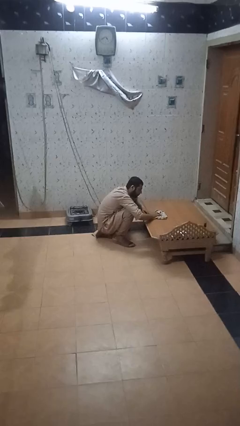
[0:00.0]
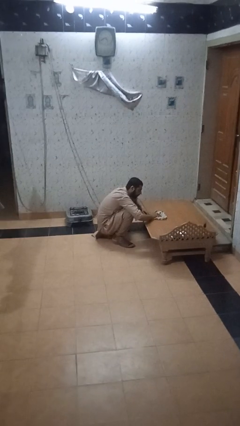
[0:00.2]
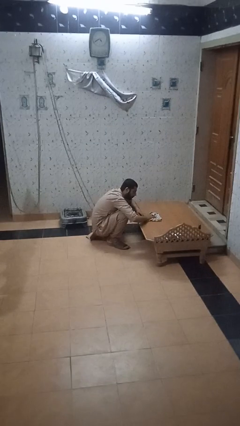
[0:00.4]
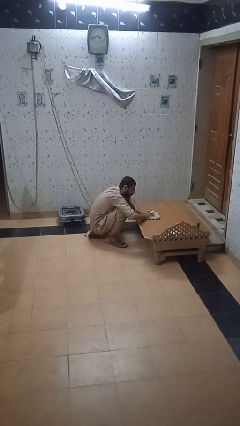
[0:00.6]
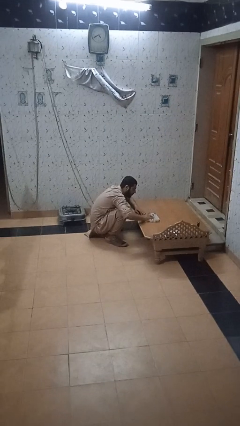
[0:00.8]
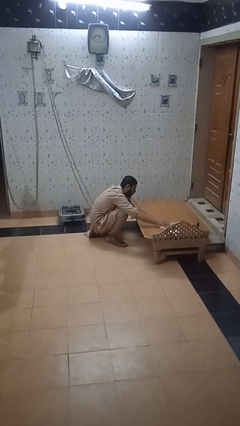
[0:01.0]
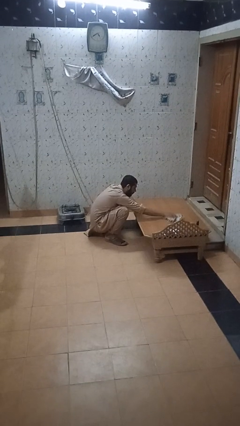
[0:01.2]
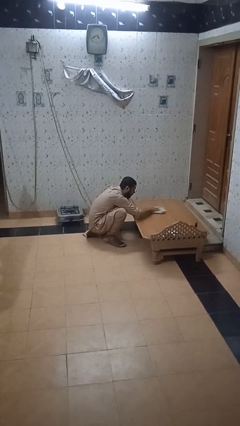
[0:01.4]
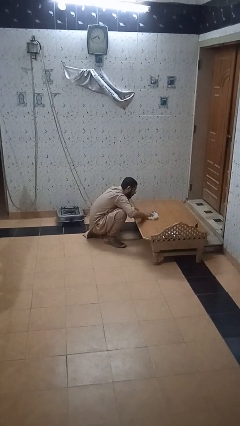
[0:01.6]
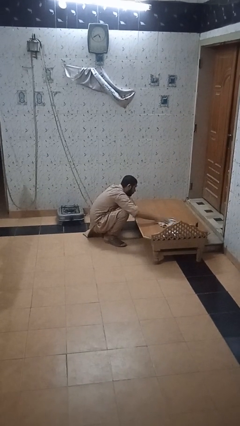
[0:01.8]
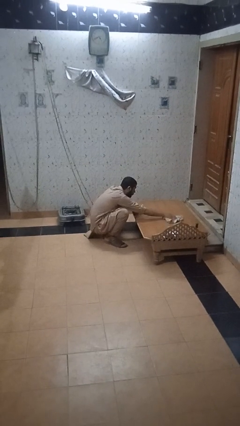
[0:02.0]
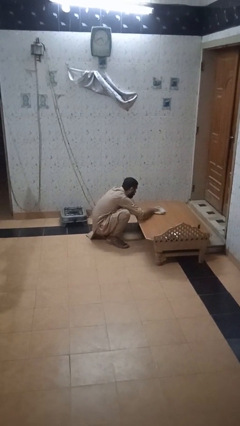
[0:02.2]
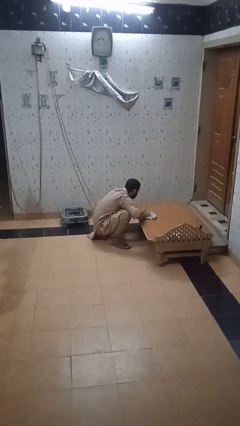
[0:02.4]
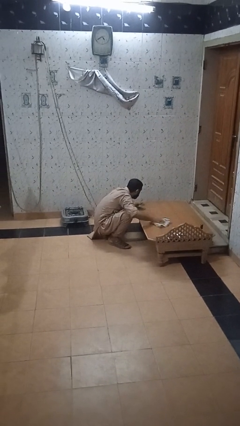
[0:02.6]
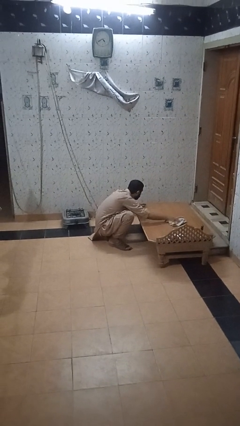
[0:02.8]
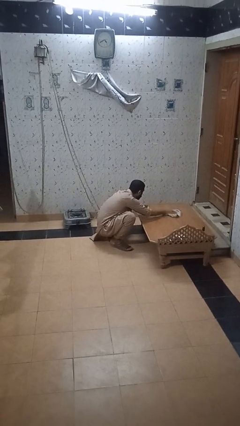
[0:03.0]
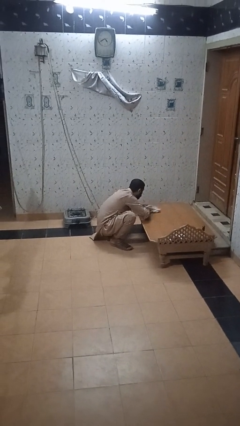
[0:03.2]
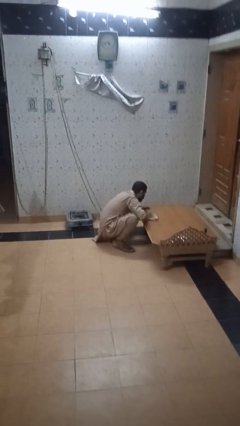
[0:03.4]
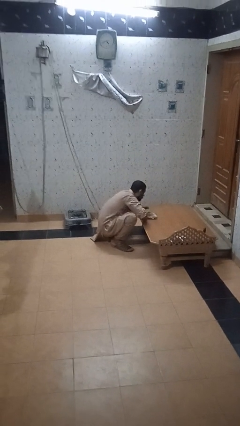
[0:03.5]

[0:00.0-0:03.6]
person cleans table with rag

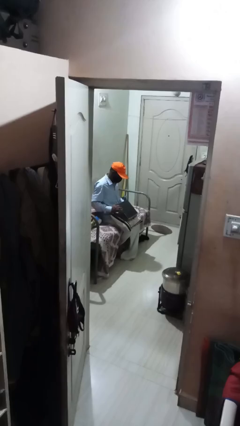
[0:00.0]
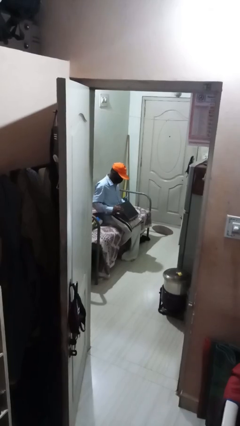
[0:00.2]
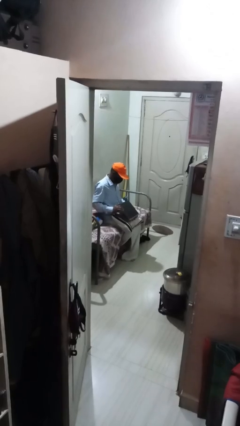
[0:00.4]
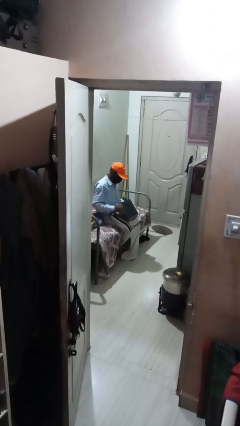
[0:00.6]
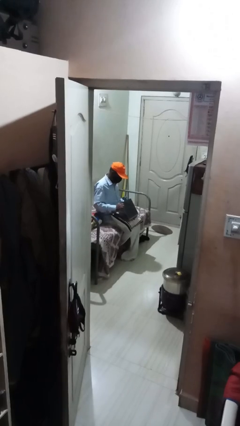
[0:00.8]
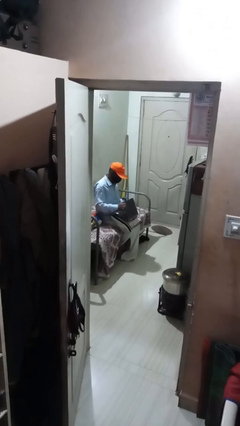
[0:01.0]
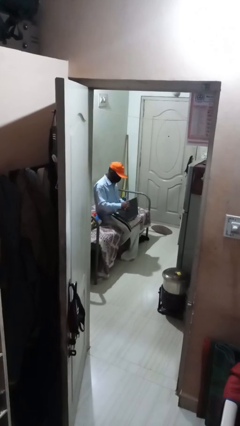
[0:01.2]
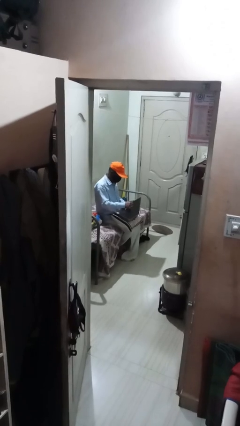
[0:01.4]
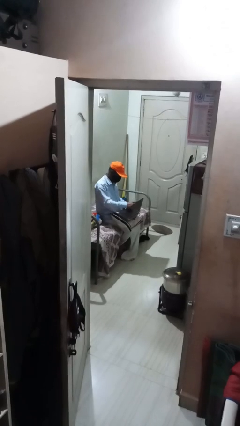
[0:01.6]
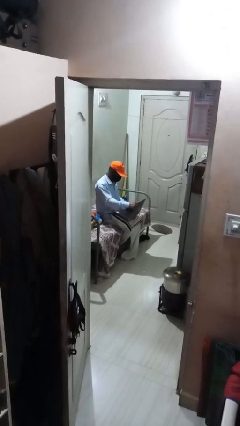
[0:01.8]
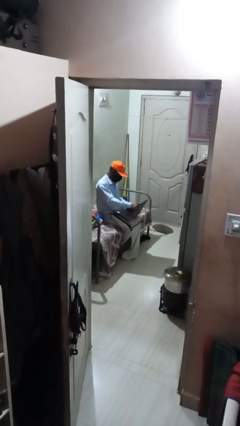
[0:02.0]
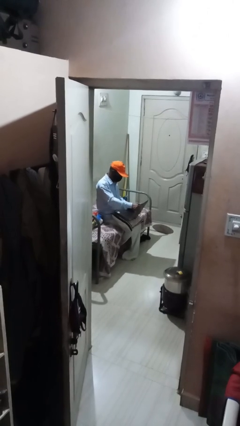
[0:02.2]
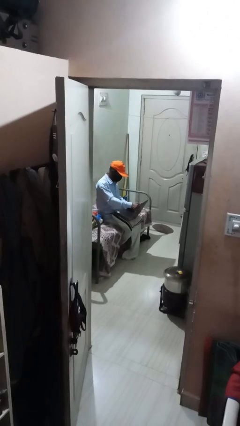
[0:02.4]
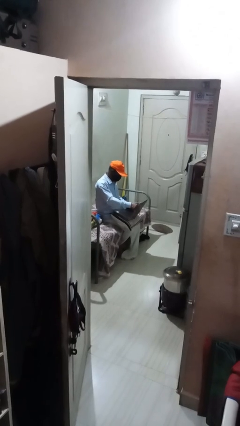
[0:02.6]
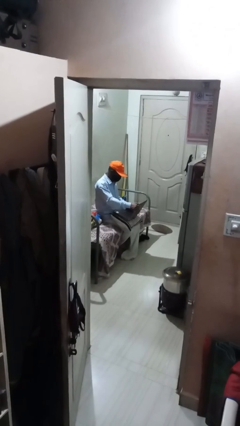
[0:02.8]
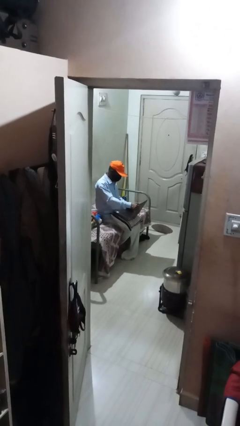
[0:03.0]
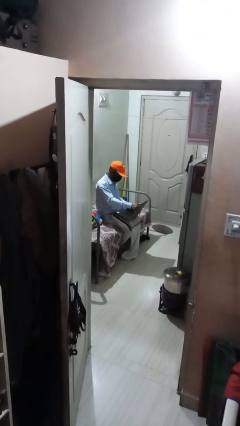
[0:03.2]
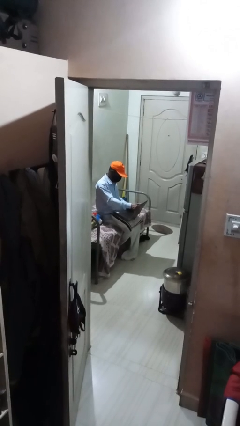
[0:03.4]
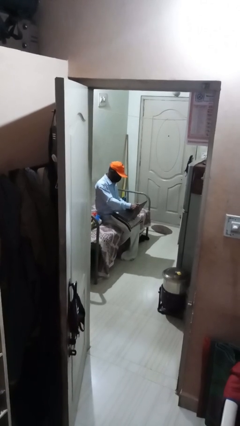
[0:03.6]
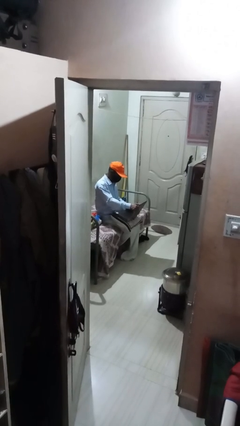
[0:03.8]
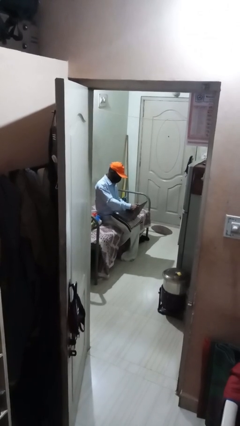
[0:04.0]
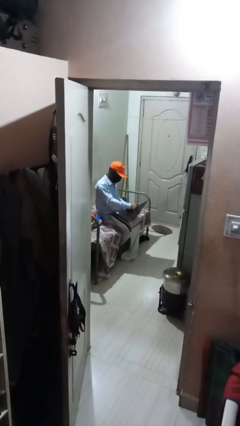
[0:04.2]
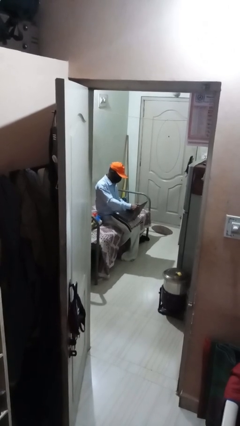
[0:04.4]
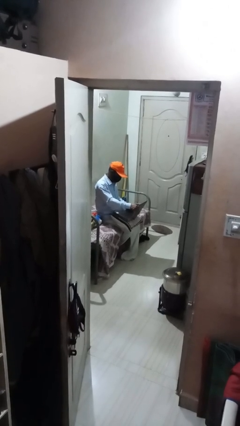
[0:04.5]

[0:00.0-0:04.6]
person interacts with laptop

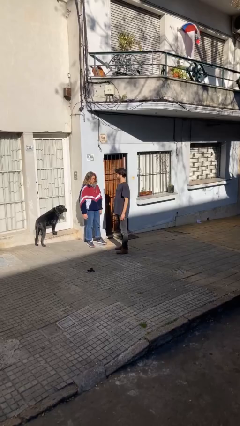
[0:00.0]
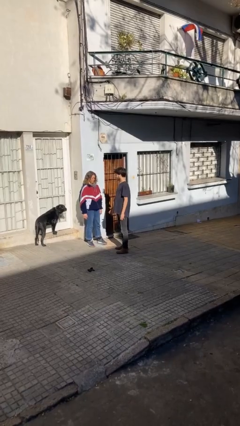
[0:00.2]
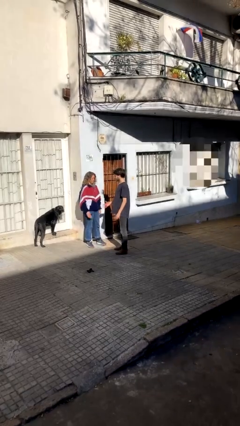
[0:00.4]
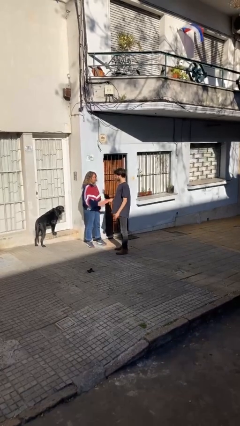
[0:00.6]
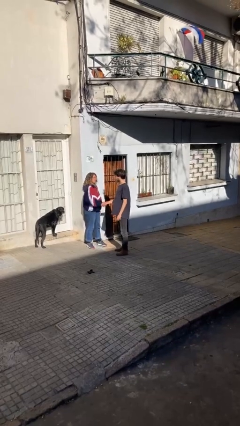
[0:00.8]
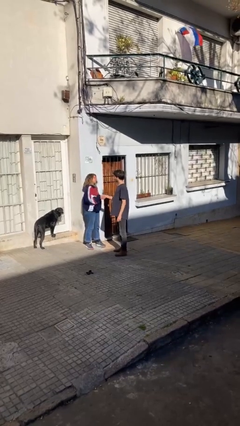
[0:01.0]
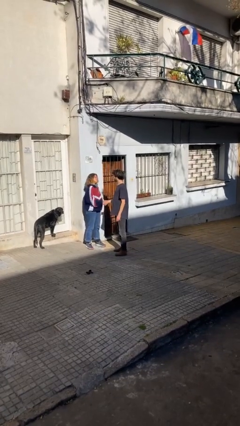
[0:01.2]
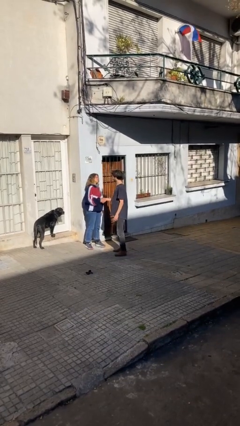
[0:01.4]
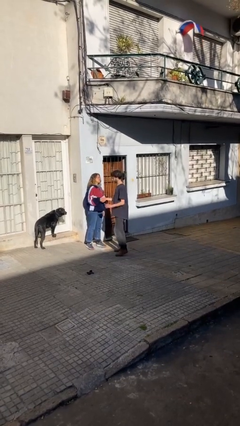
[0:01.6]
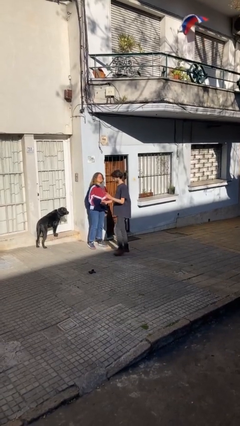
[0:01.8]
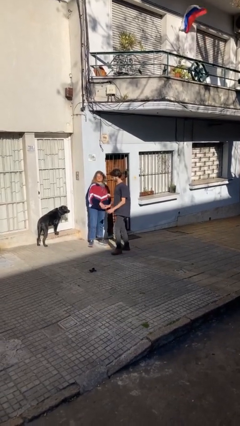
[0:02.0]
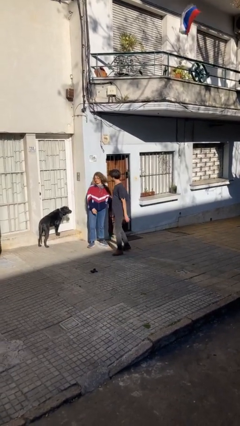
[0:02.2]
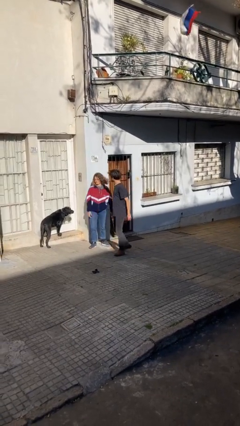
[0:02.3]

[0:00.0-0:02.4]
person shakes hand

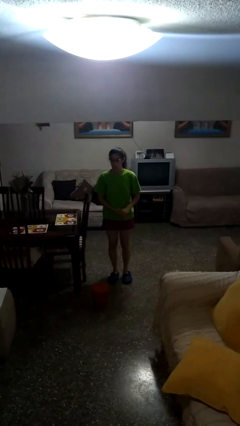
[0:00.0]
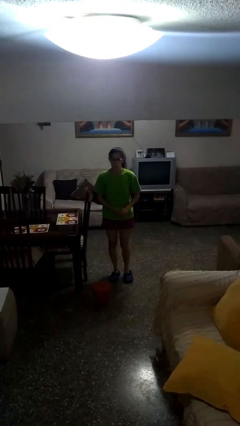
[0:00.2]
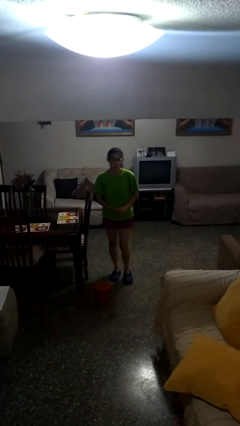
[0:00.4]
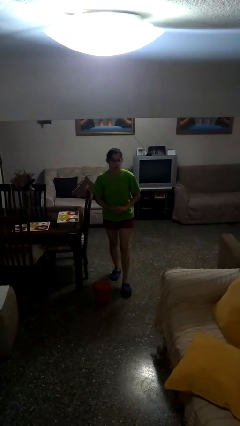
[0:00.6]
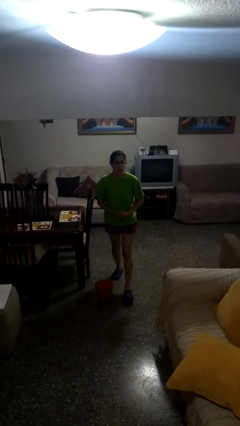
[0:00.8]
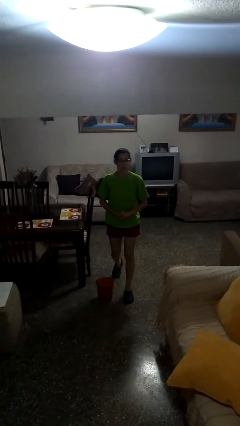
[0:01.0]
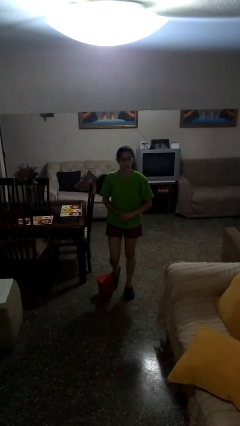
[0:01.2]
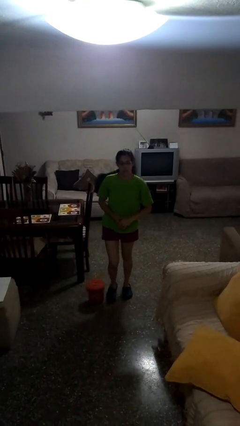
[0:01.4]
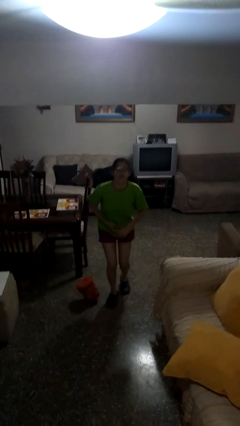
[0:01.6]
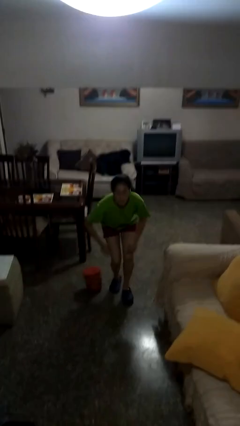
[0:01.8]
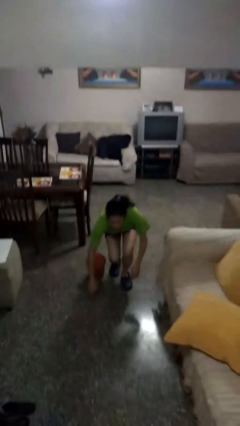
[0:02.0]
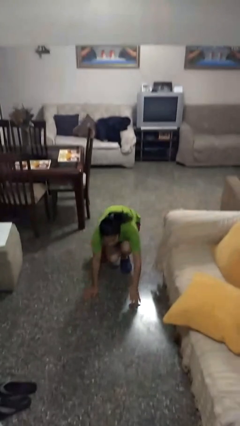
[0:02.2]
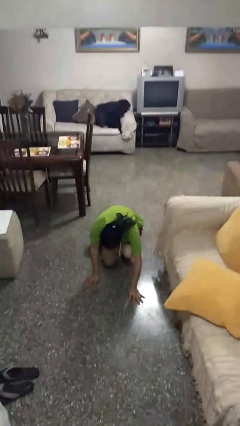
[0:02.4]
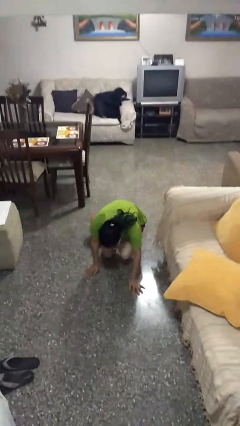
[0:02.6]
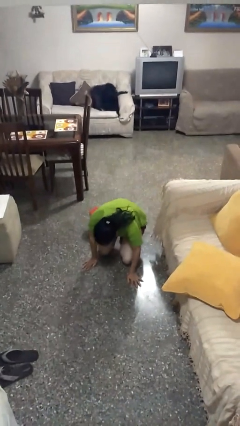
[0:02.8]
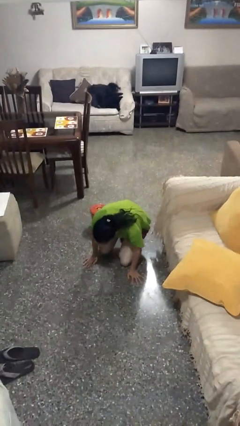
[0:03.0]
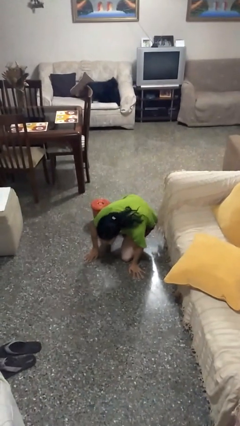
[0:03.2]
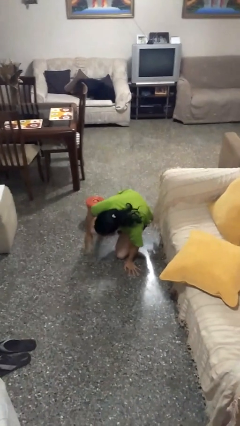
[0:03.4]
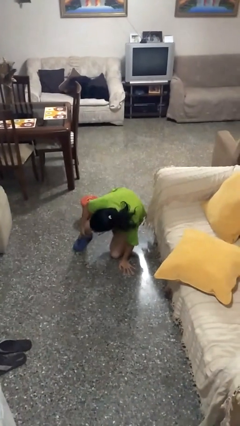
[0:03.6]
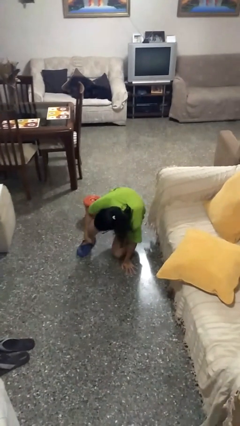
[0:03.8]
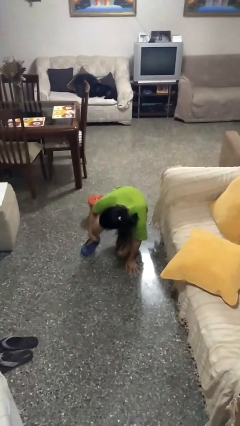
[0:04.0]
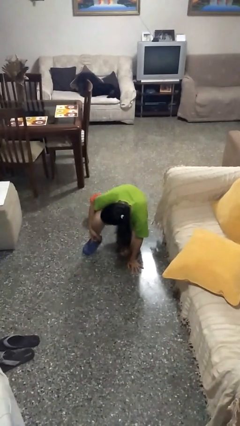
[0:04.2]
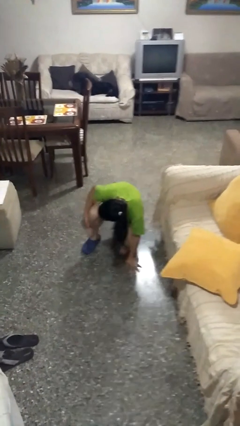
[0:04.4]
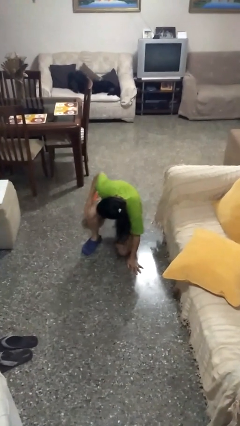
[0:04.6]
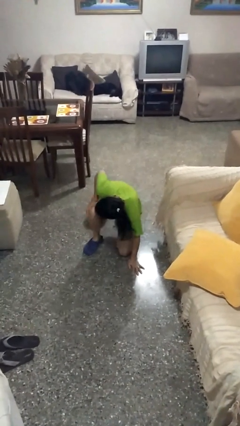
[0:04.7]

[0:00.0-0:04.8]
person trips on object on floor

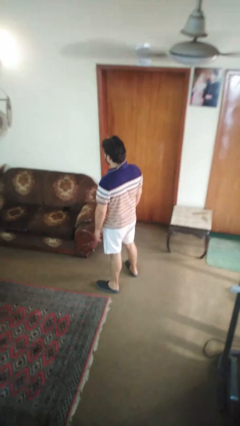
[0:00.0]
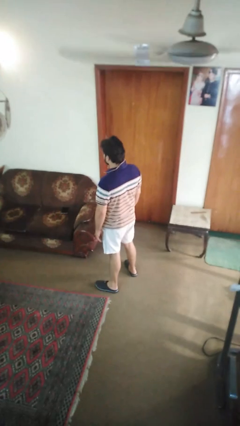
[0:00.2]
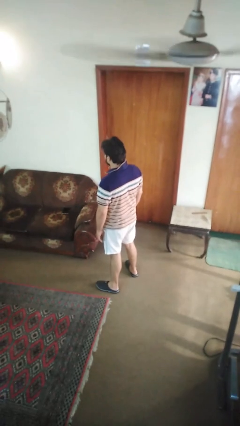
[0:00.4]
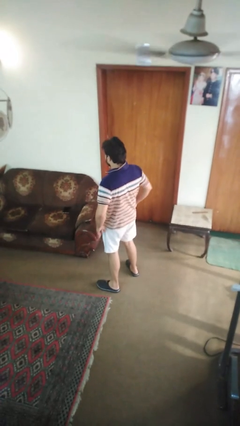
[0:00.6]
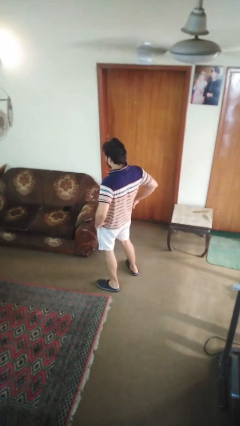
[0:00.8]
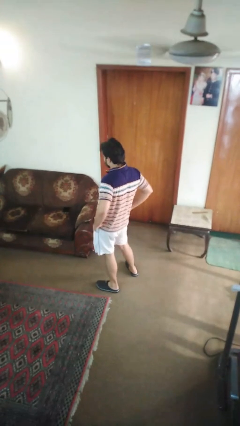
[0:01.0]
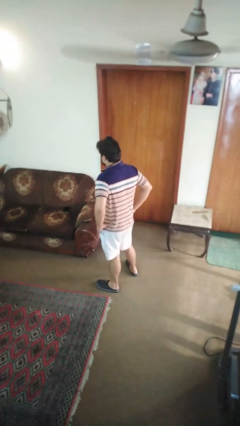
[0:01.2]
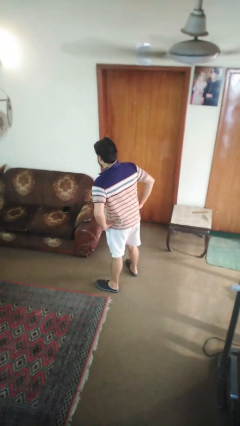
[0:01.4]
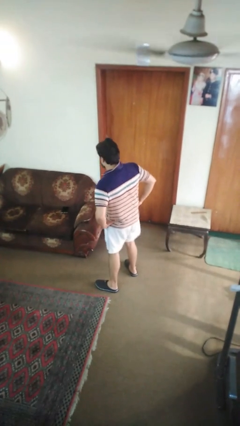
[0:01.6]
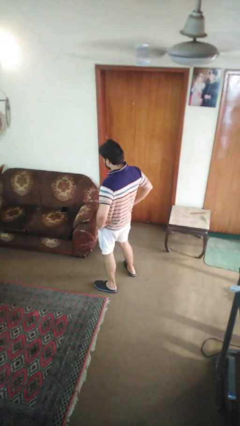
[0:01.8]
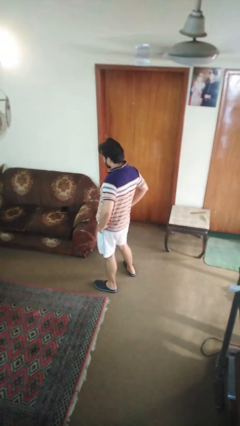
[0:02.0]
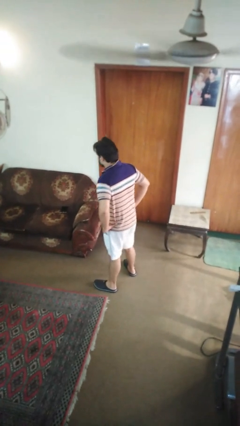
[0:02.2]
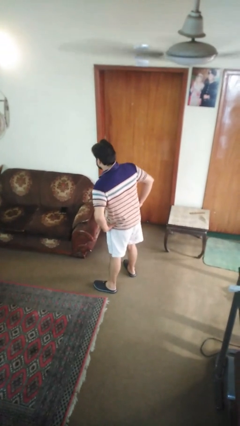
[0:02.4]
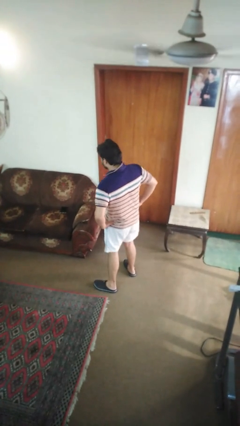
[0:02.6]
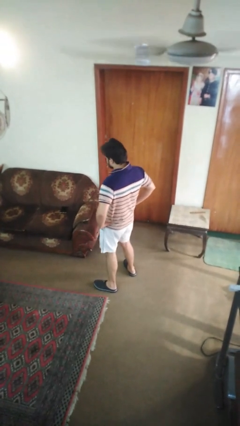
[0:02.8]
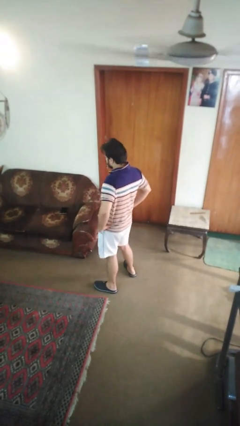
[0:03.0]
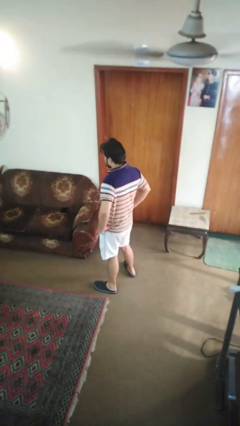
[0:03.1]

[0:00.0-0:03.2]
person wiggles hips
